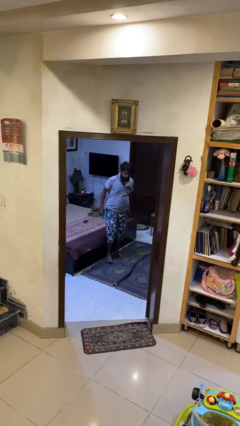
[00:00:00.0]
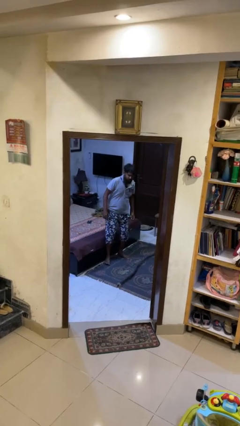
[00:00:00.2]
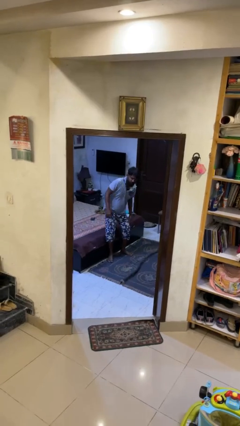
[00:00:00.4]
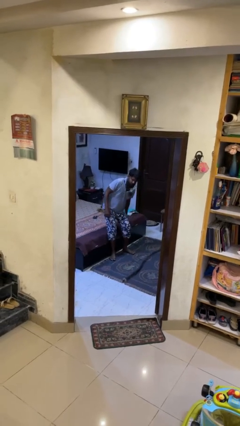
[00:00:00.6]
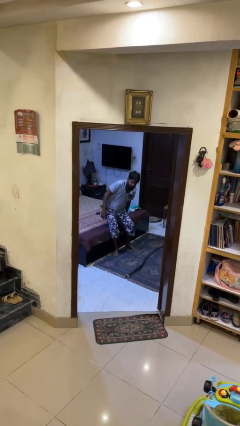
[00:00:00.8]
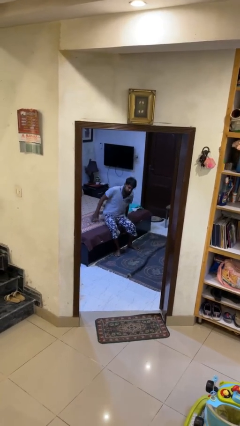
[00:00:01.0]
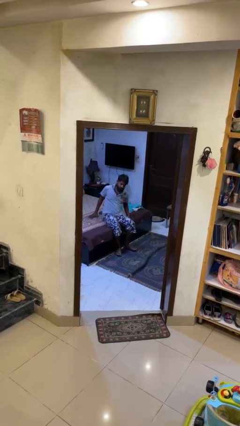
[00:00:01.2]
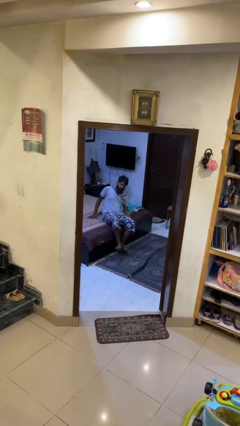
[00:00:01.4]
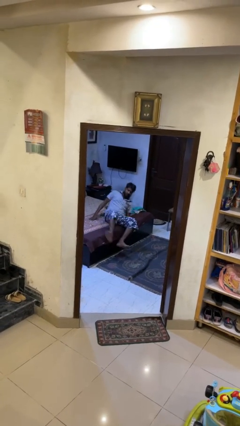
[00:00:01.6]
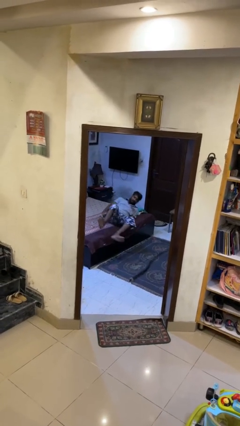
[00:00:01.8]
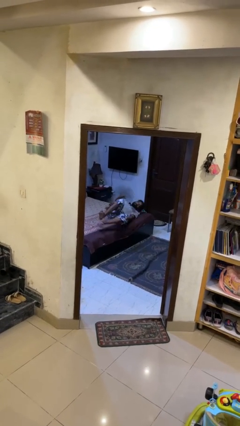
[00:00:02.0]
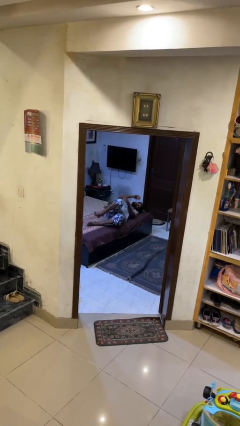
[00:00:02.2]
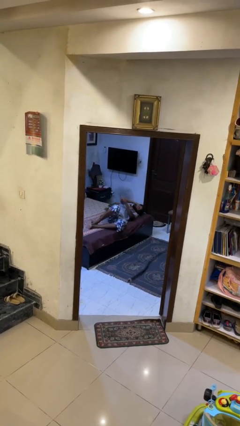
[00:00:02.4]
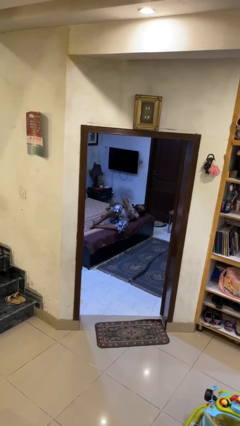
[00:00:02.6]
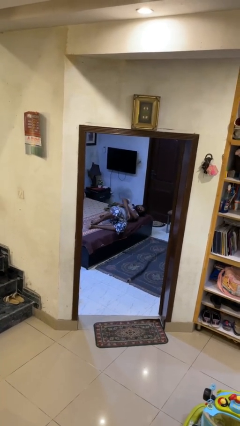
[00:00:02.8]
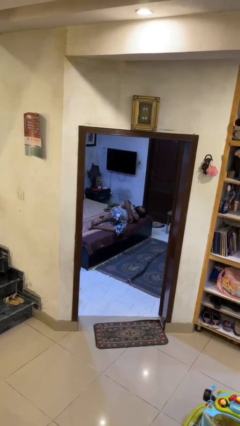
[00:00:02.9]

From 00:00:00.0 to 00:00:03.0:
person lies down on bed

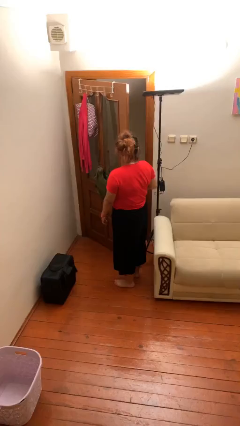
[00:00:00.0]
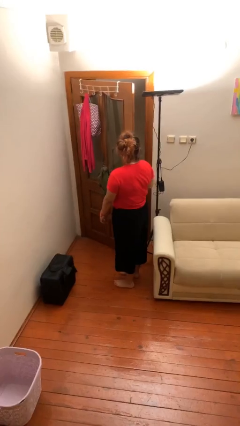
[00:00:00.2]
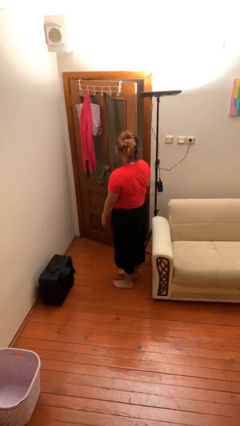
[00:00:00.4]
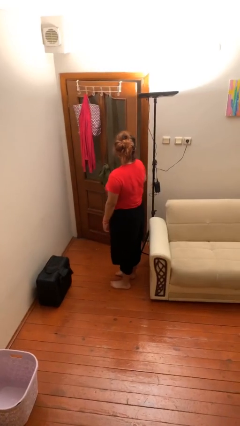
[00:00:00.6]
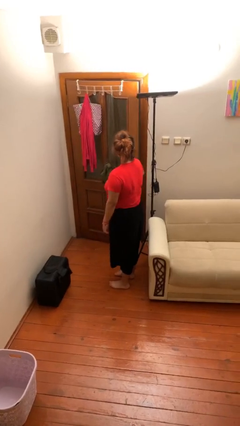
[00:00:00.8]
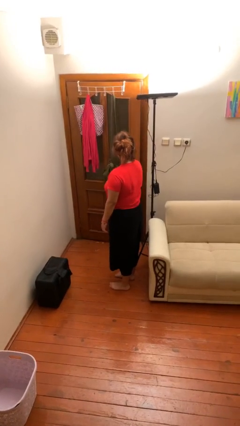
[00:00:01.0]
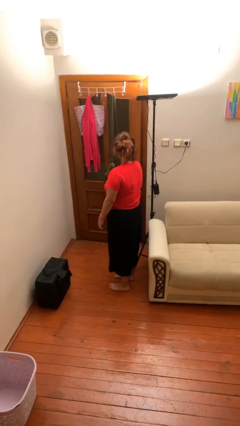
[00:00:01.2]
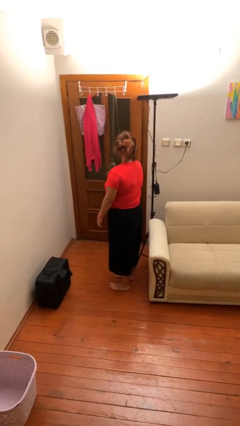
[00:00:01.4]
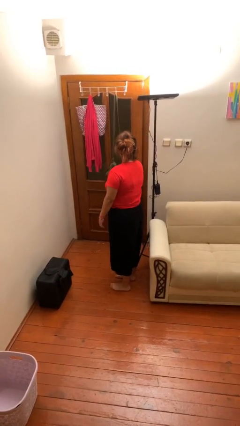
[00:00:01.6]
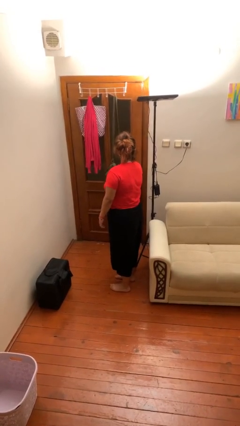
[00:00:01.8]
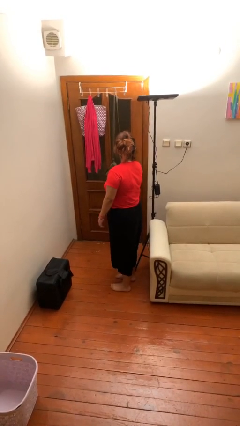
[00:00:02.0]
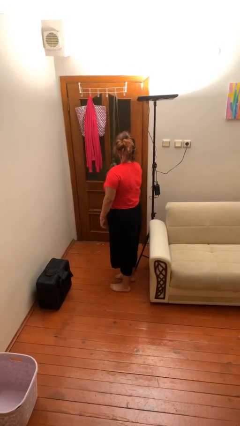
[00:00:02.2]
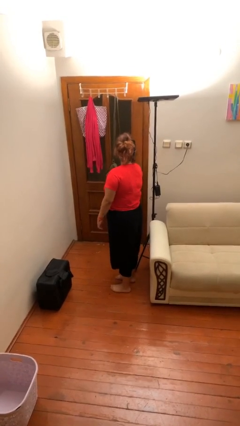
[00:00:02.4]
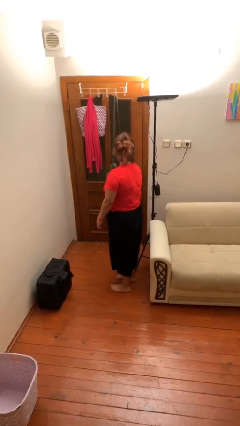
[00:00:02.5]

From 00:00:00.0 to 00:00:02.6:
person closes facility door

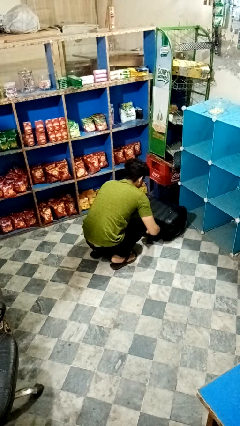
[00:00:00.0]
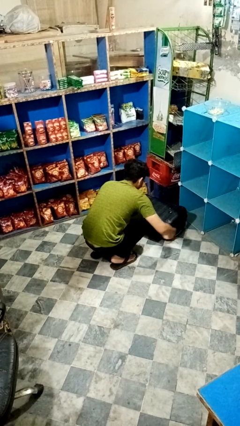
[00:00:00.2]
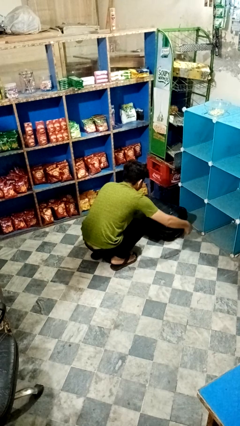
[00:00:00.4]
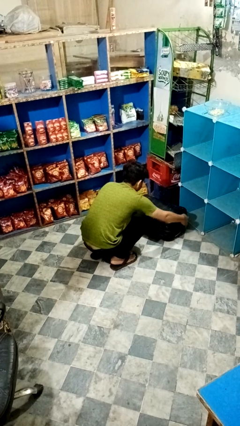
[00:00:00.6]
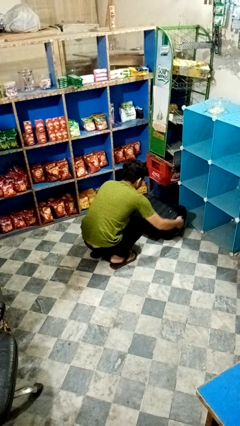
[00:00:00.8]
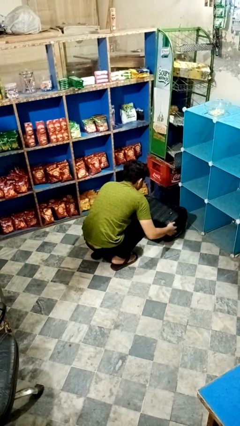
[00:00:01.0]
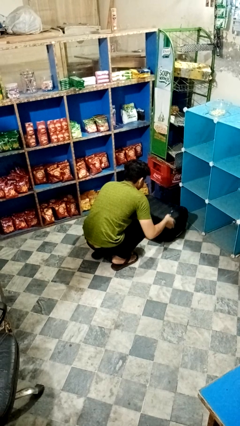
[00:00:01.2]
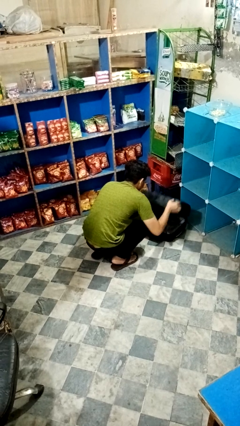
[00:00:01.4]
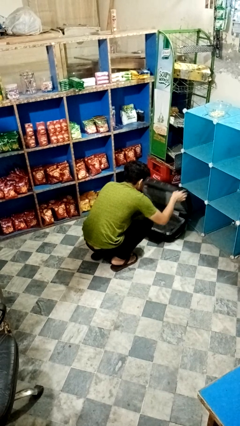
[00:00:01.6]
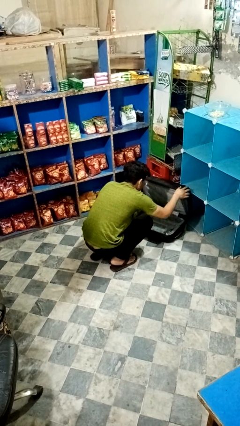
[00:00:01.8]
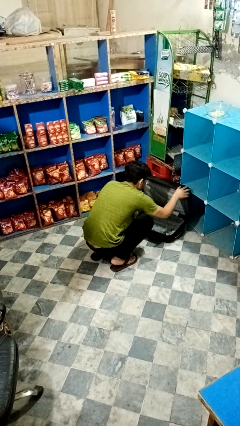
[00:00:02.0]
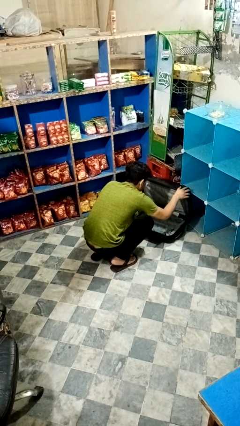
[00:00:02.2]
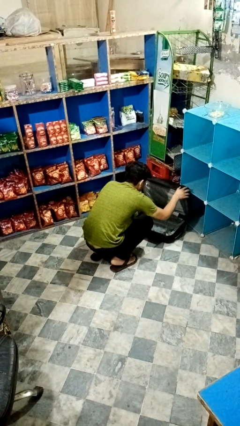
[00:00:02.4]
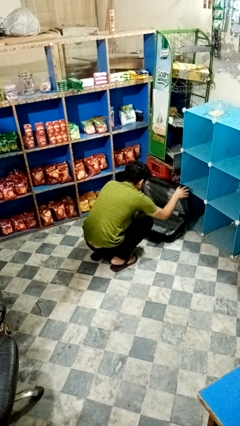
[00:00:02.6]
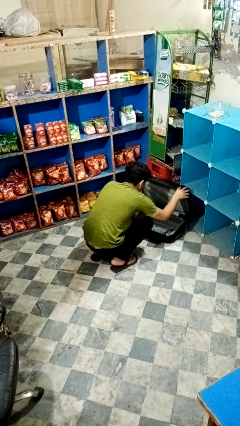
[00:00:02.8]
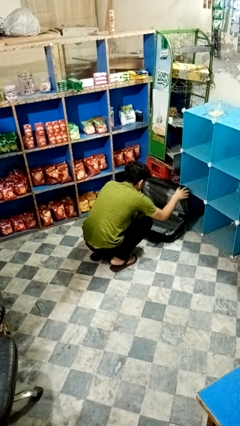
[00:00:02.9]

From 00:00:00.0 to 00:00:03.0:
person opens suitcase

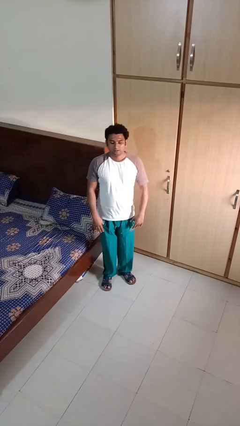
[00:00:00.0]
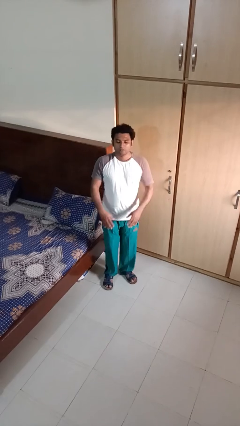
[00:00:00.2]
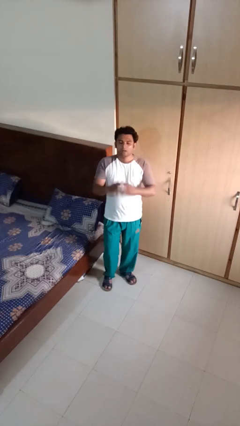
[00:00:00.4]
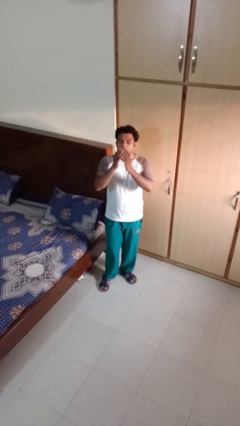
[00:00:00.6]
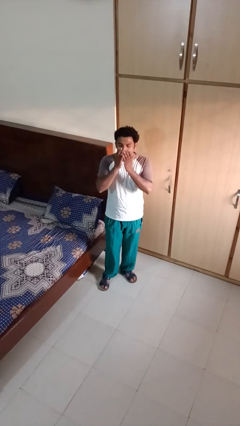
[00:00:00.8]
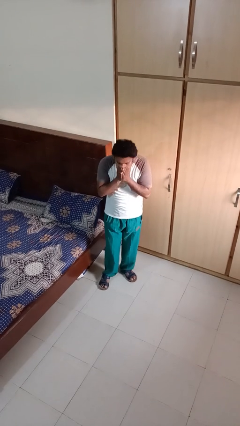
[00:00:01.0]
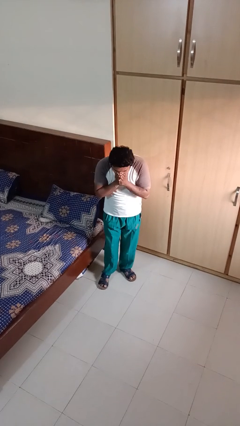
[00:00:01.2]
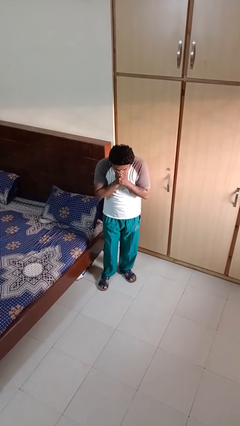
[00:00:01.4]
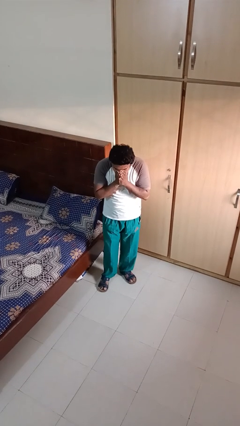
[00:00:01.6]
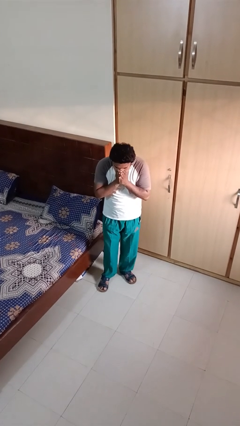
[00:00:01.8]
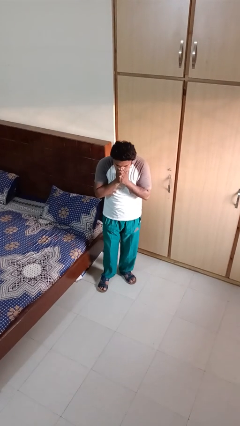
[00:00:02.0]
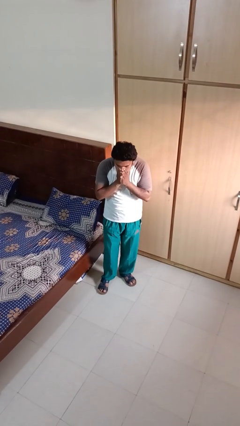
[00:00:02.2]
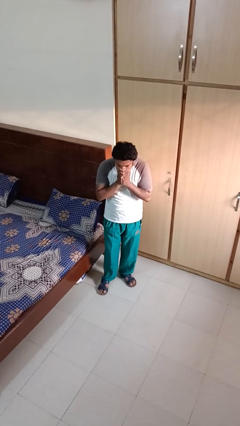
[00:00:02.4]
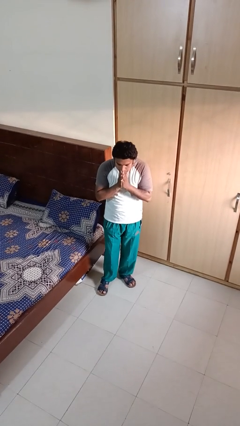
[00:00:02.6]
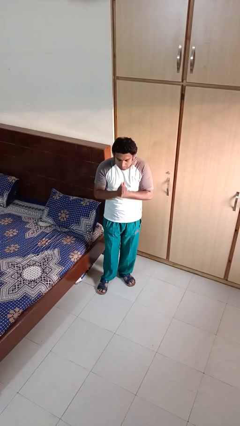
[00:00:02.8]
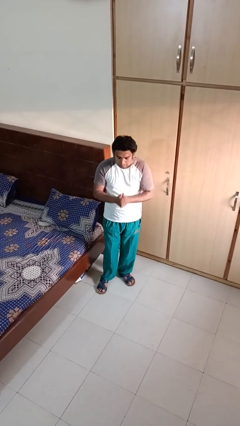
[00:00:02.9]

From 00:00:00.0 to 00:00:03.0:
person sneezes into hand

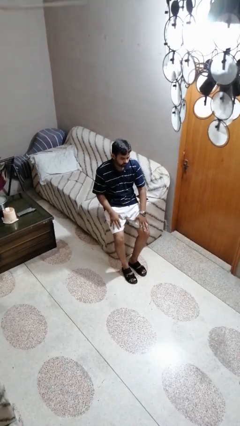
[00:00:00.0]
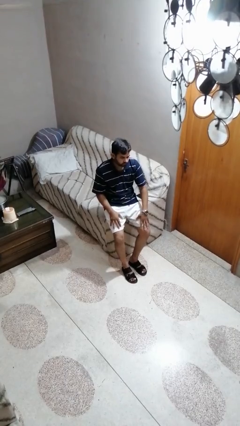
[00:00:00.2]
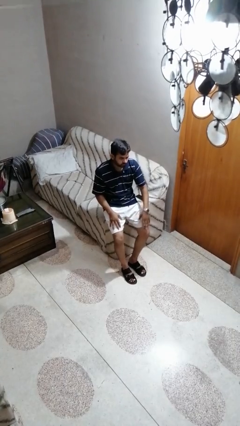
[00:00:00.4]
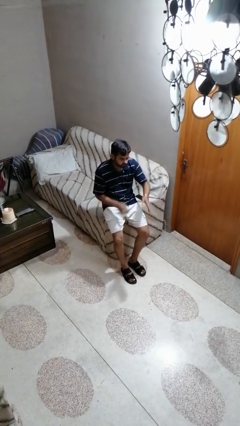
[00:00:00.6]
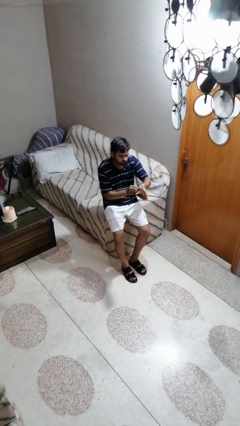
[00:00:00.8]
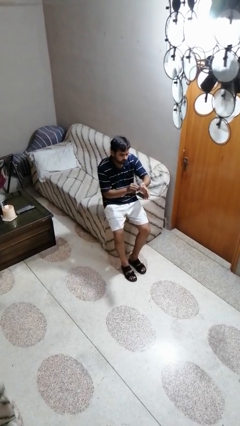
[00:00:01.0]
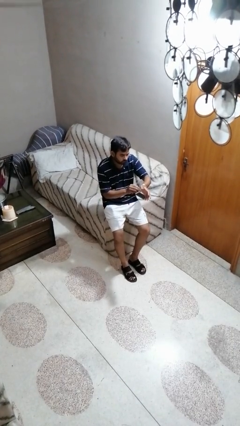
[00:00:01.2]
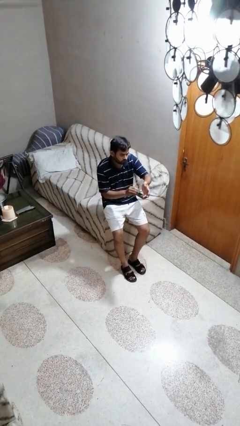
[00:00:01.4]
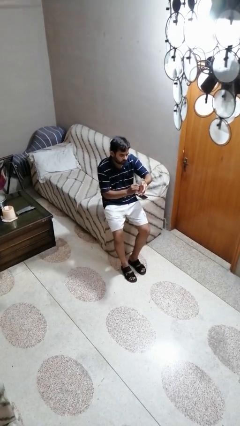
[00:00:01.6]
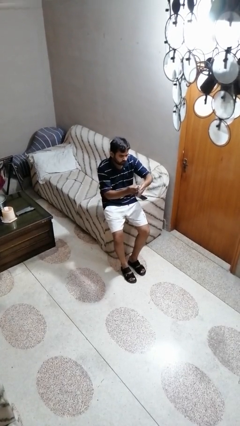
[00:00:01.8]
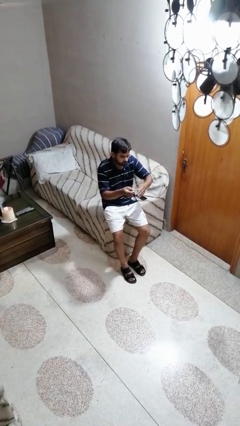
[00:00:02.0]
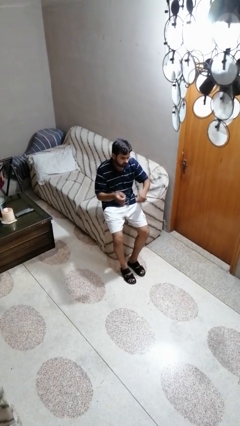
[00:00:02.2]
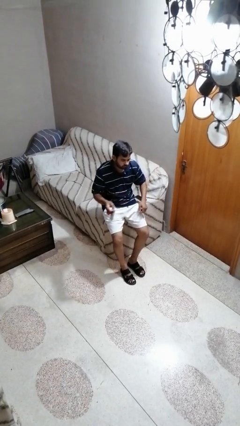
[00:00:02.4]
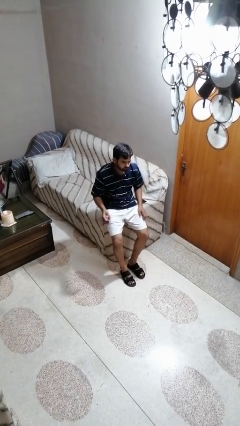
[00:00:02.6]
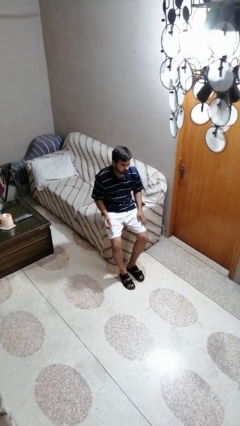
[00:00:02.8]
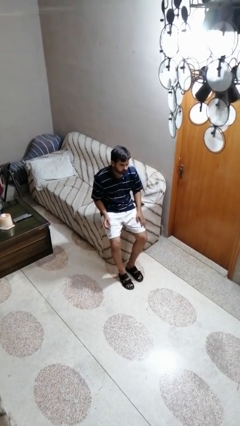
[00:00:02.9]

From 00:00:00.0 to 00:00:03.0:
person takes off wristwatch

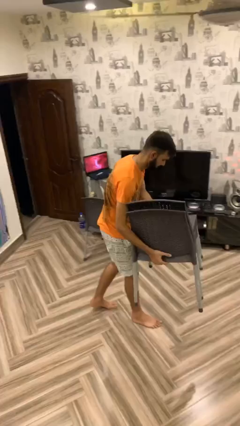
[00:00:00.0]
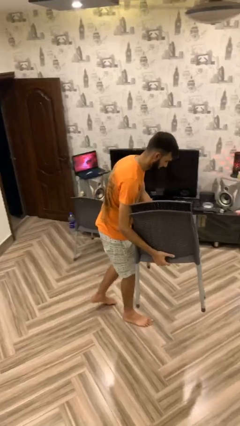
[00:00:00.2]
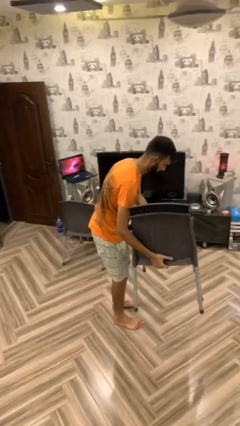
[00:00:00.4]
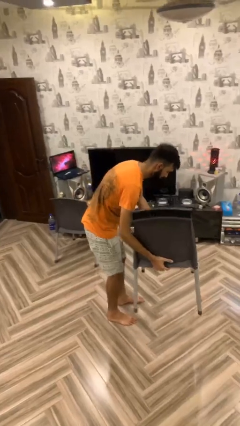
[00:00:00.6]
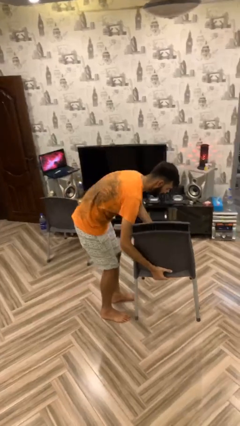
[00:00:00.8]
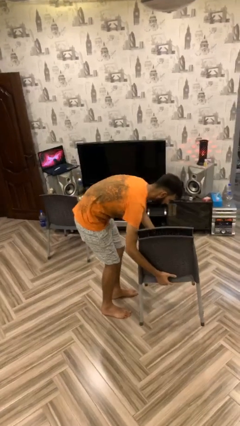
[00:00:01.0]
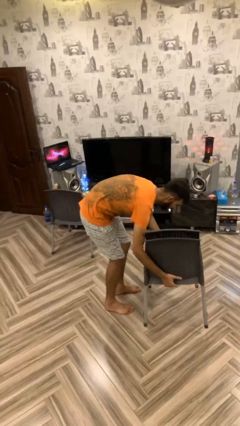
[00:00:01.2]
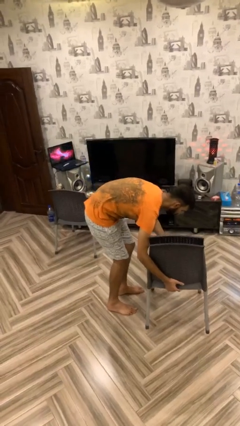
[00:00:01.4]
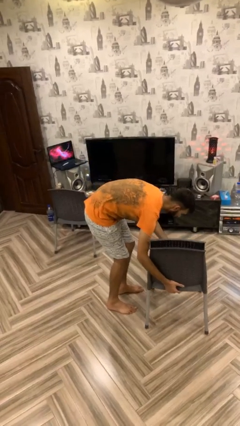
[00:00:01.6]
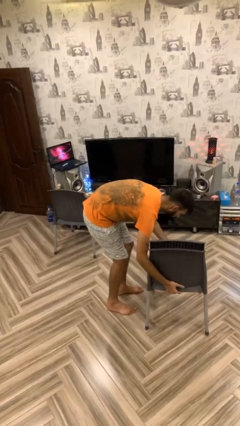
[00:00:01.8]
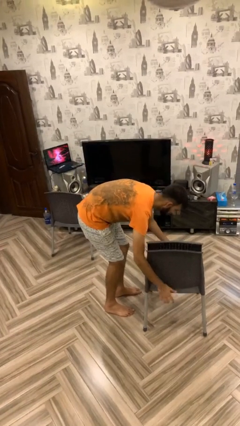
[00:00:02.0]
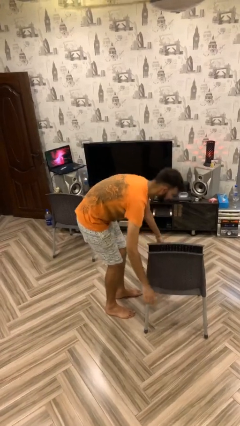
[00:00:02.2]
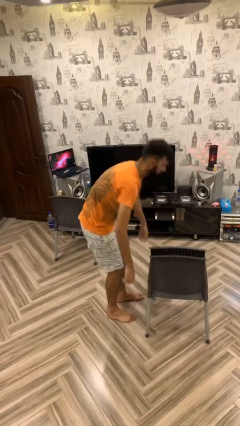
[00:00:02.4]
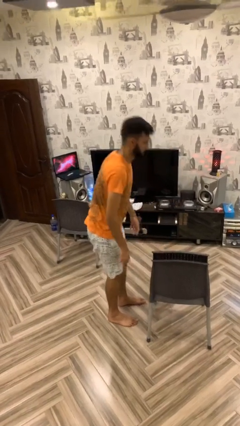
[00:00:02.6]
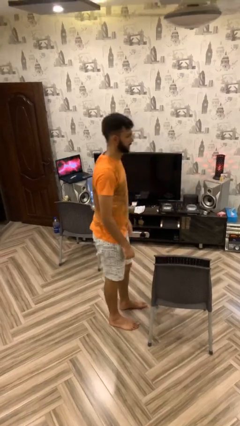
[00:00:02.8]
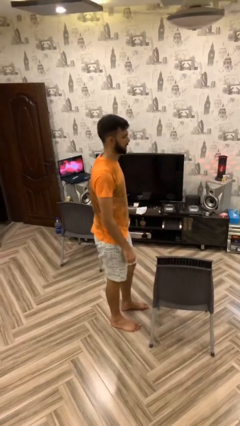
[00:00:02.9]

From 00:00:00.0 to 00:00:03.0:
person puts down object on floor
